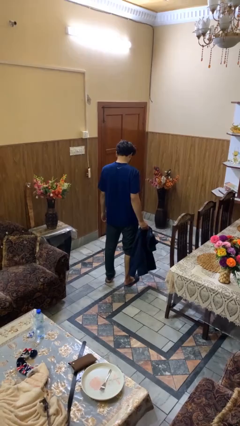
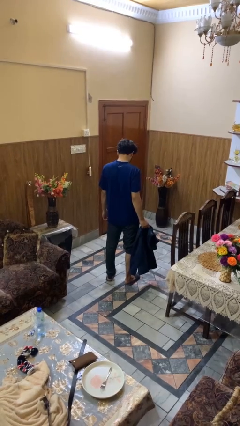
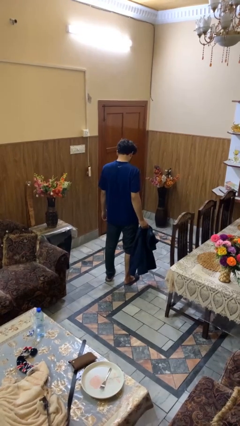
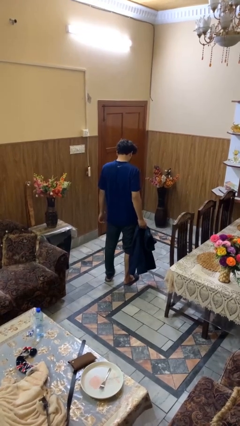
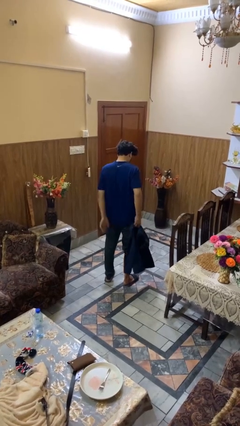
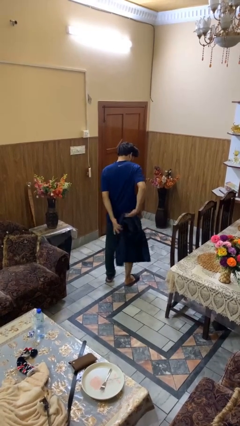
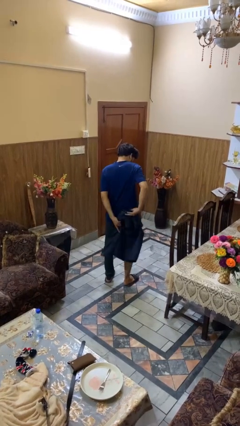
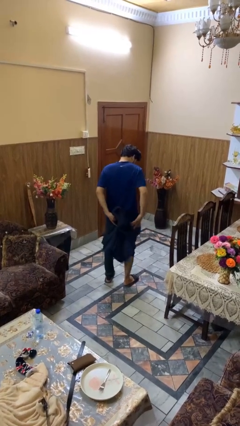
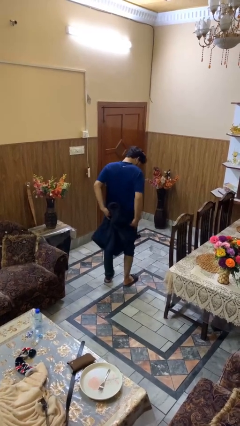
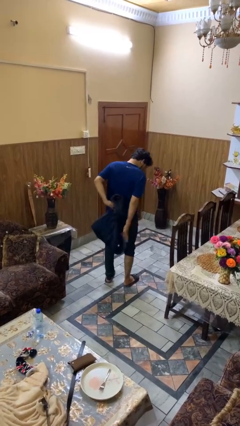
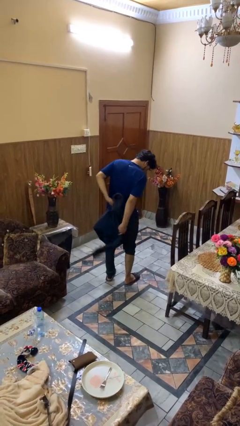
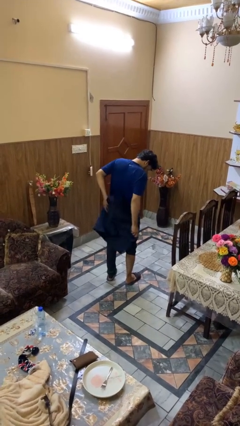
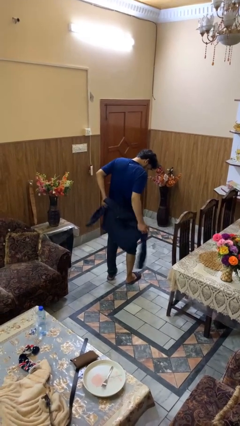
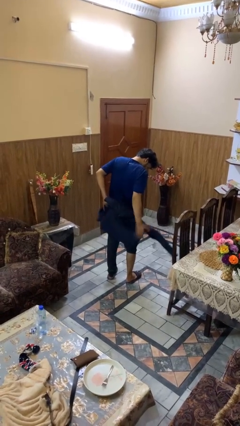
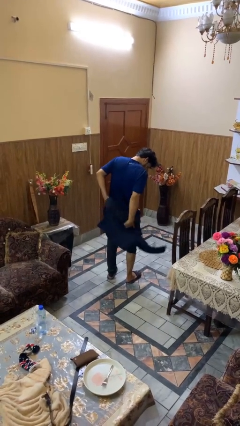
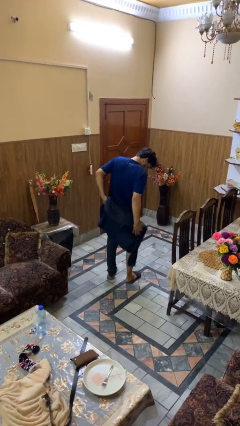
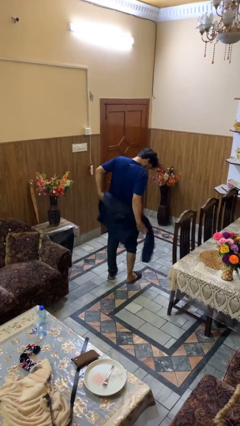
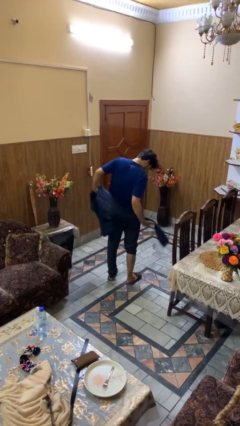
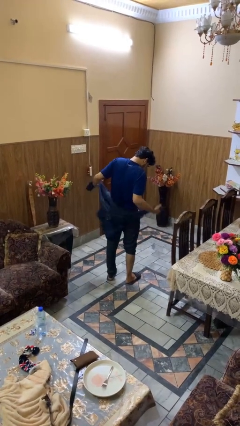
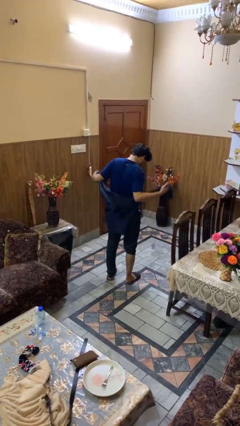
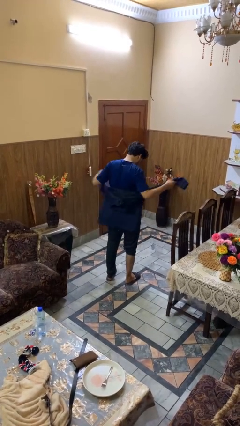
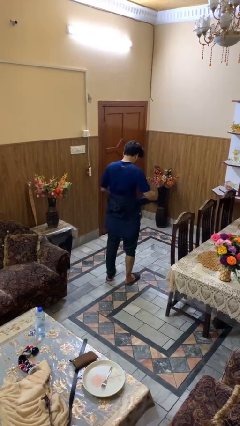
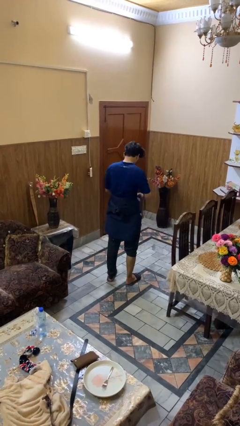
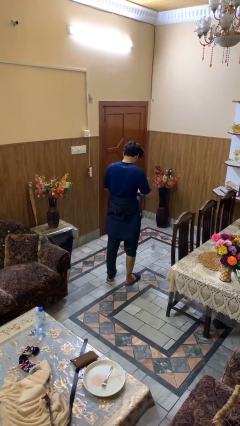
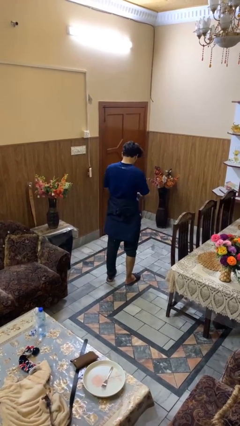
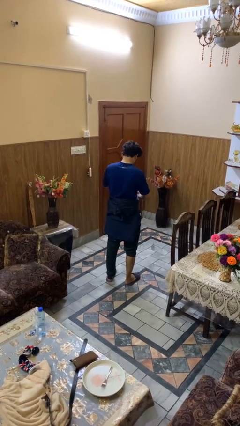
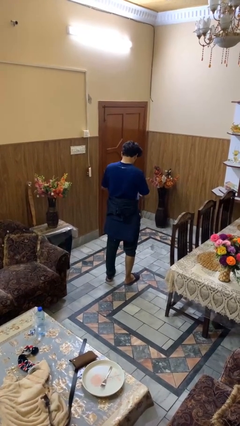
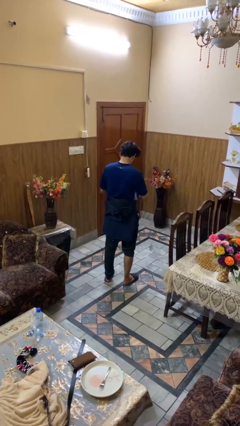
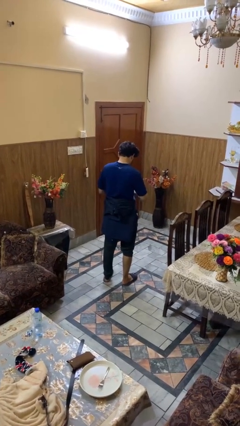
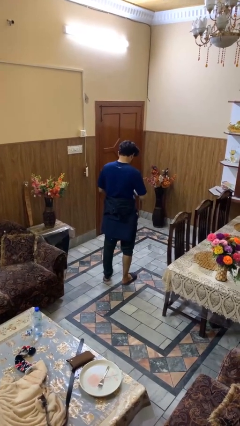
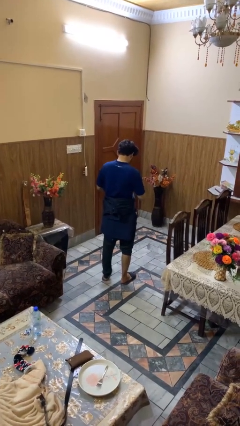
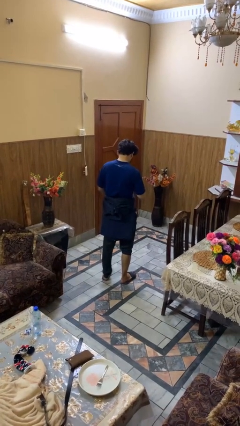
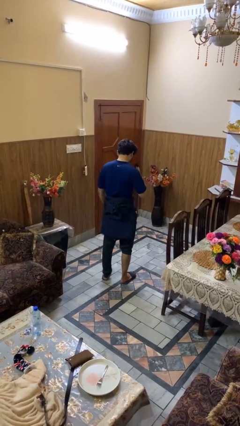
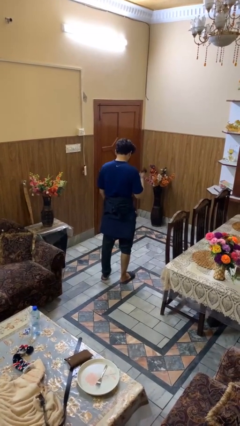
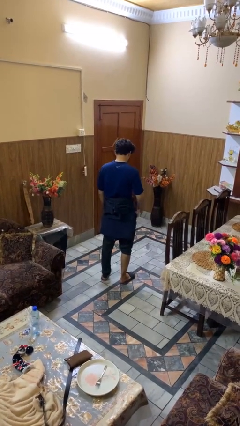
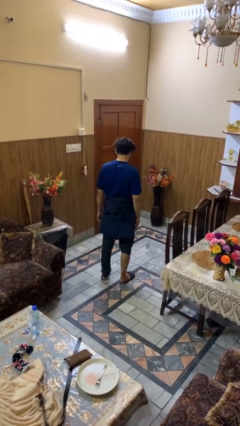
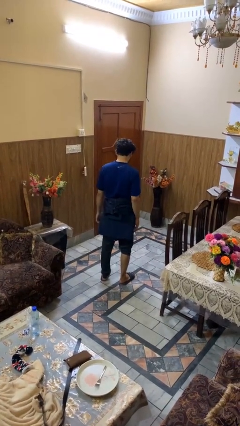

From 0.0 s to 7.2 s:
person ties jacket around waist

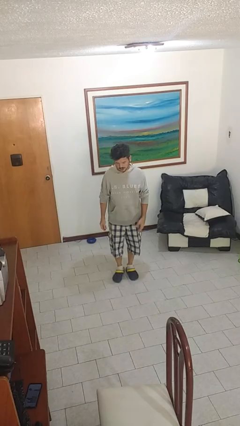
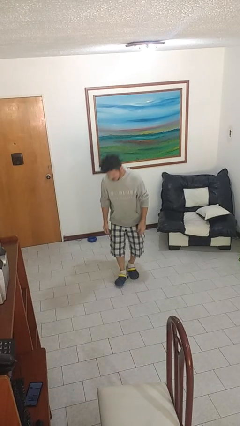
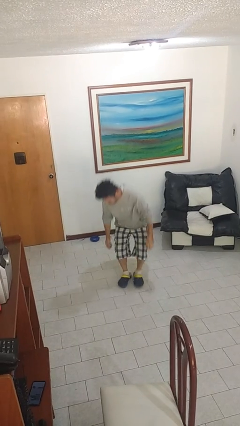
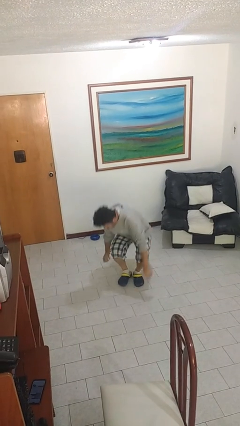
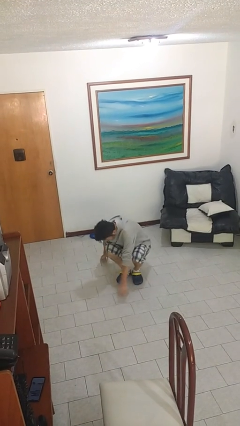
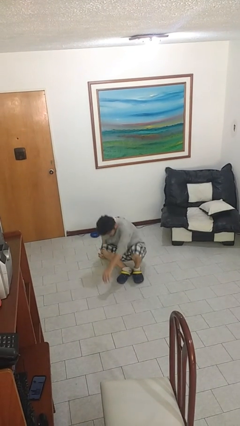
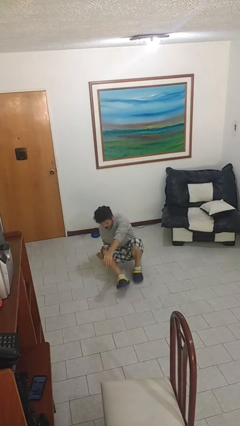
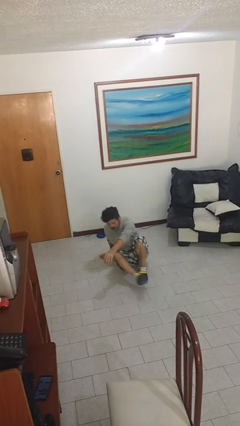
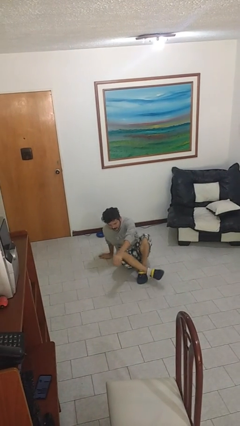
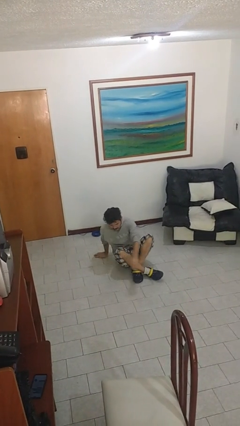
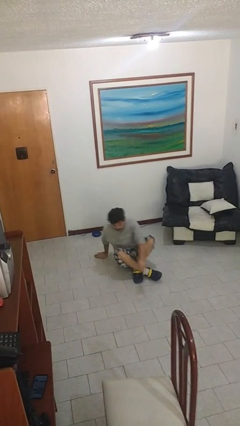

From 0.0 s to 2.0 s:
person sits crisscross

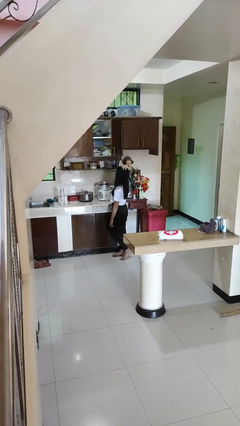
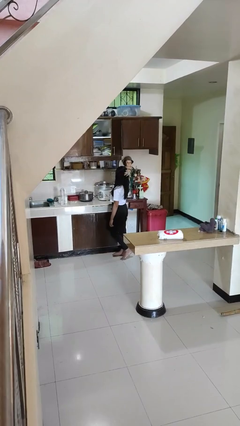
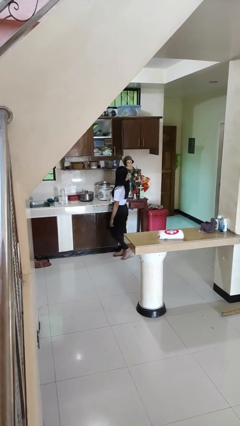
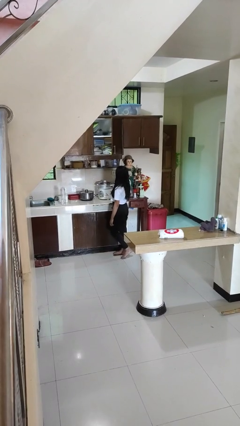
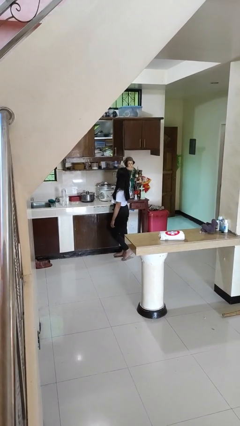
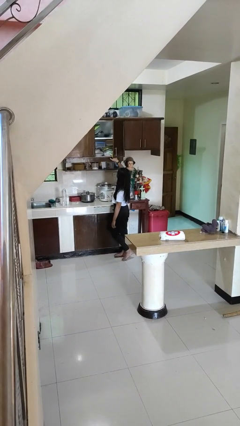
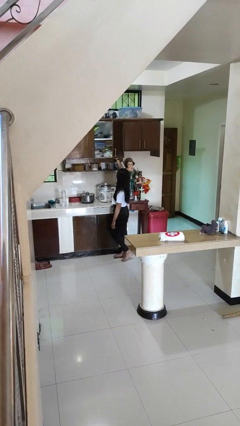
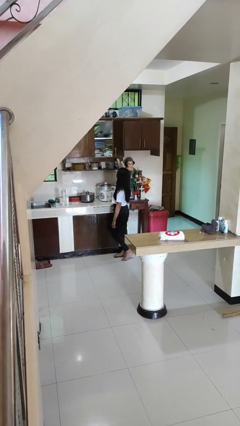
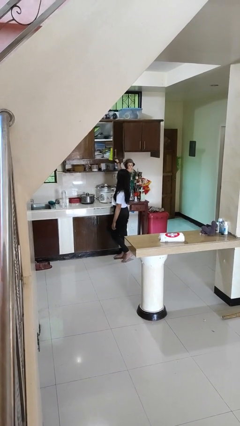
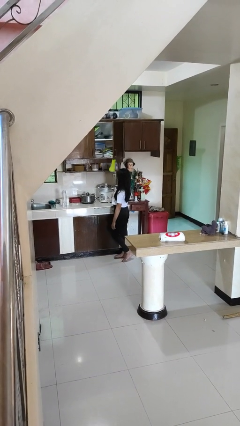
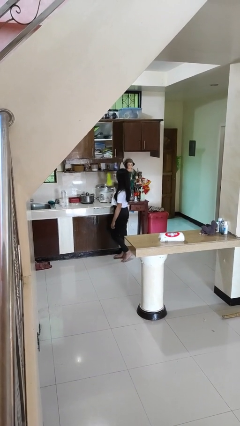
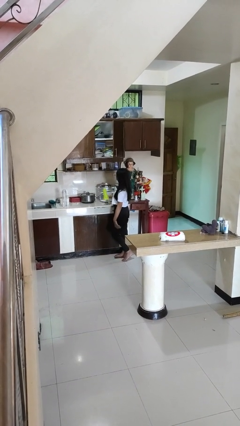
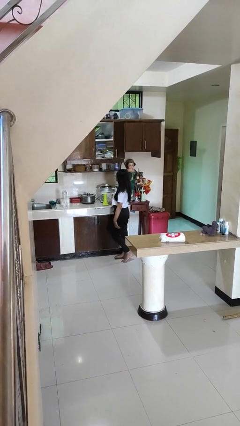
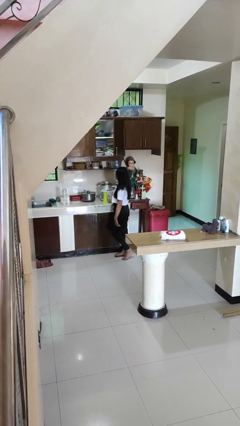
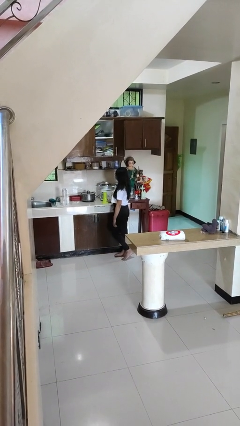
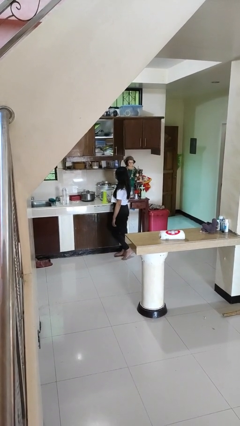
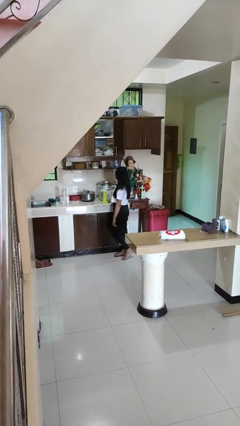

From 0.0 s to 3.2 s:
person picks up object from cabinet

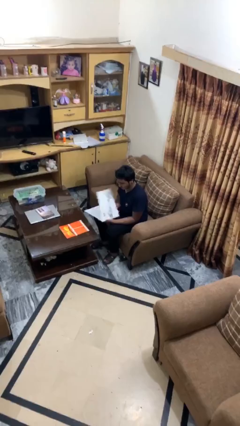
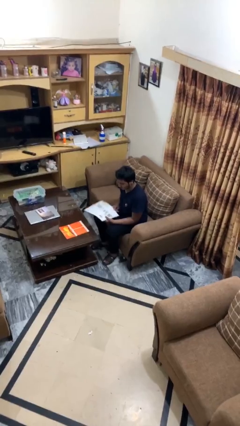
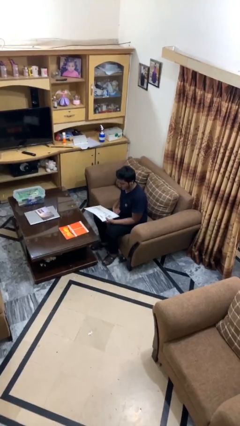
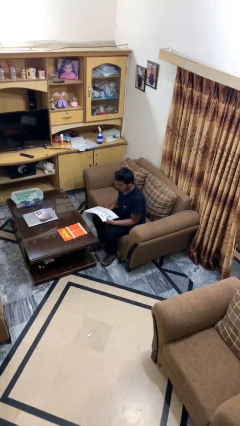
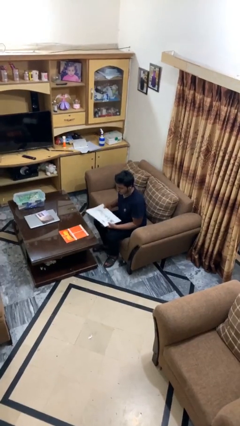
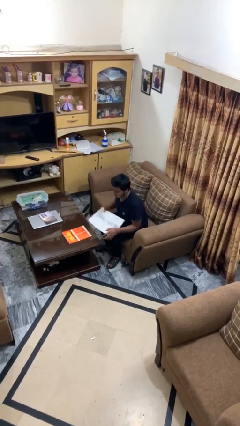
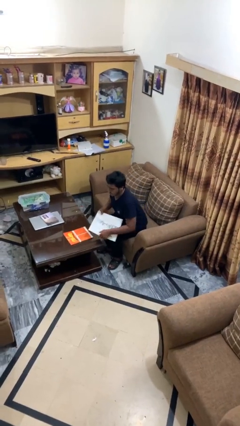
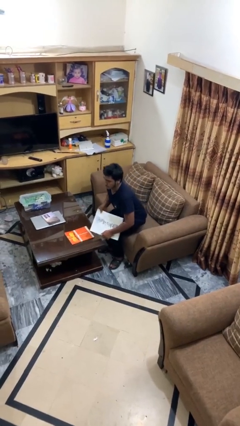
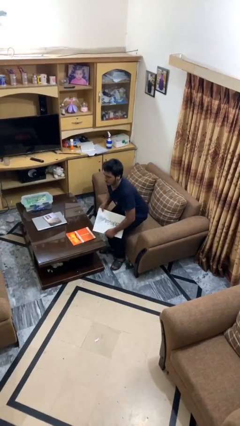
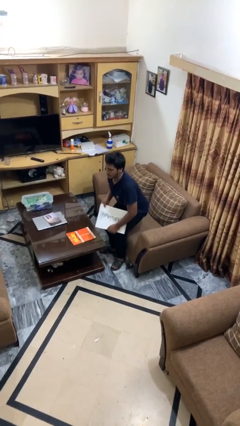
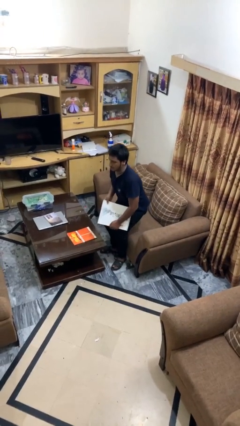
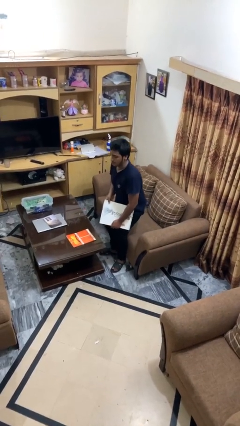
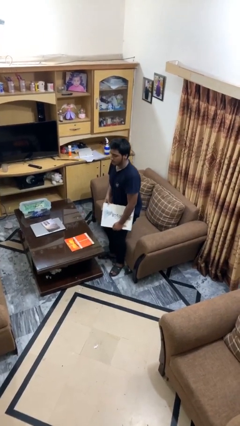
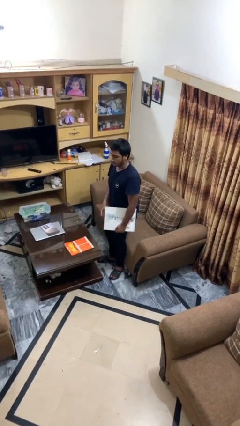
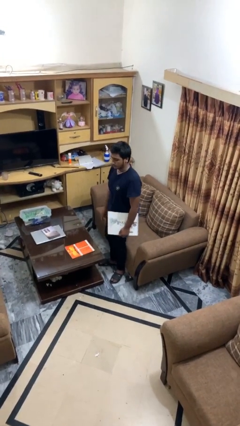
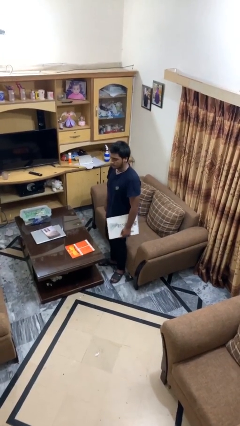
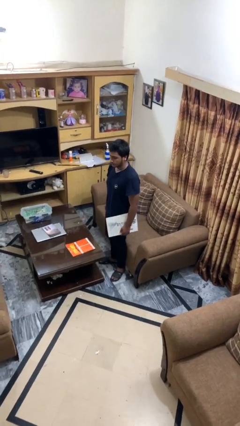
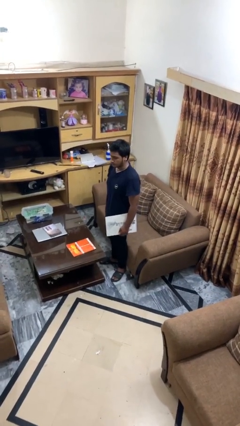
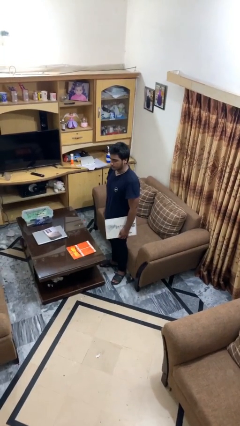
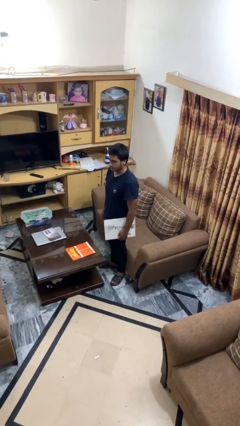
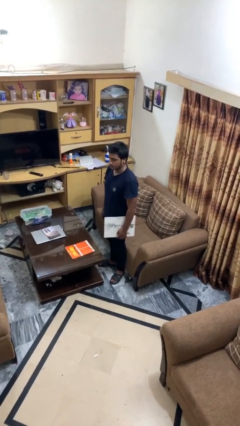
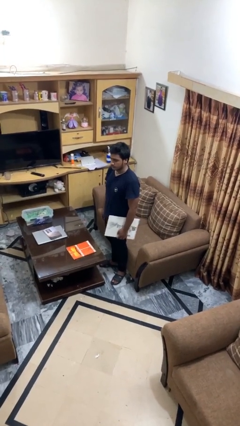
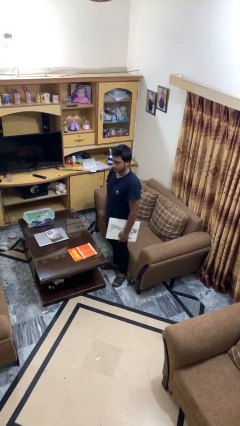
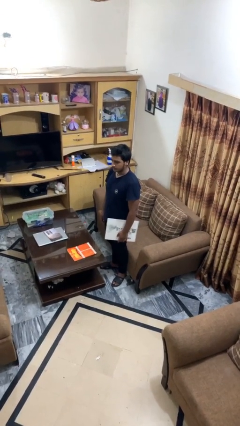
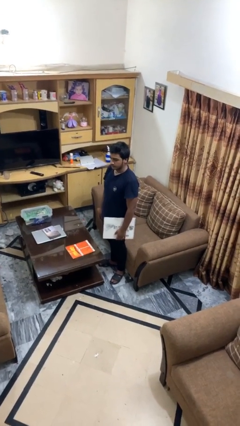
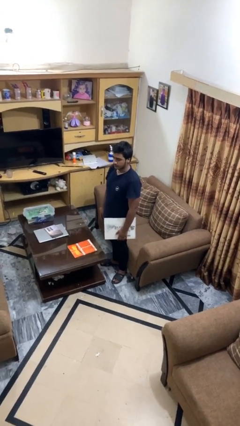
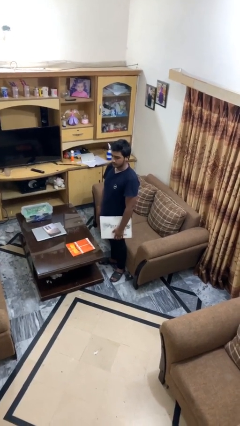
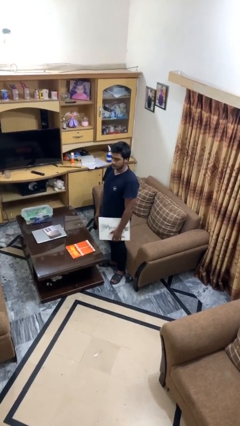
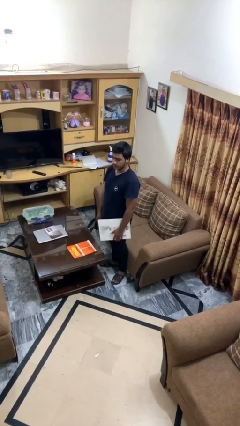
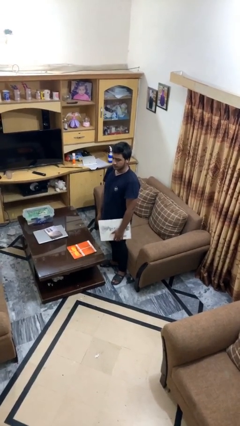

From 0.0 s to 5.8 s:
person stands up
